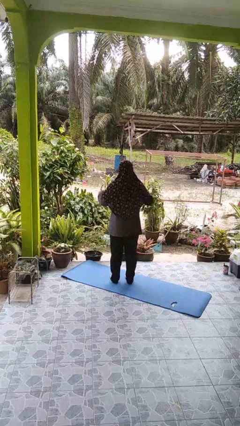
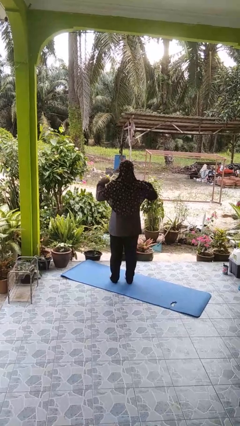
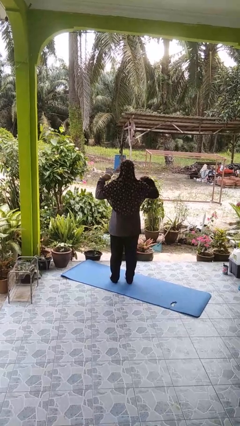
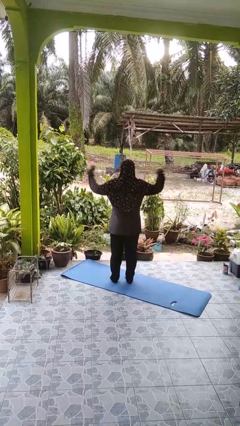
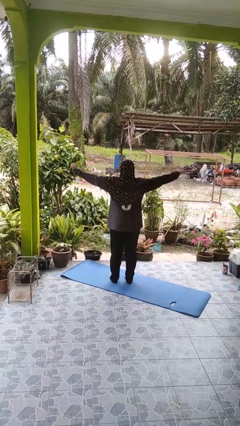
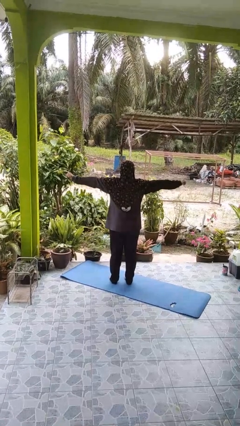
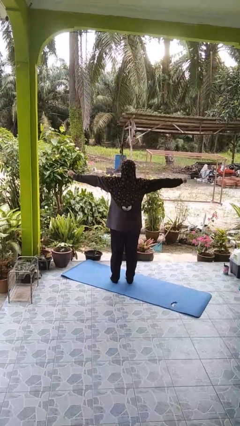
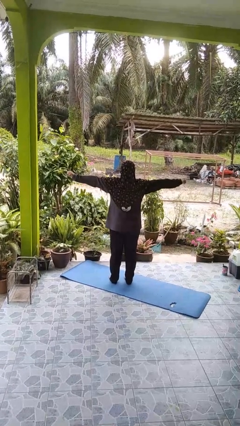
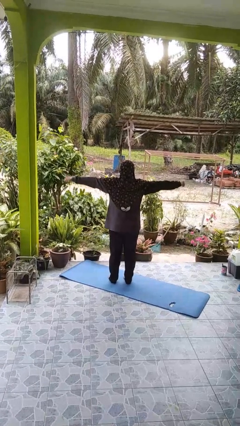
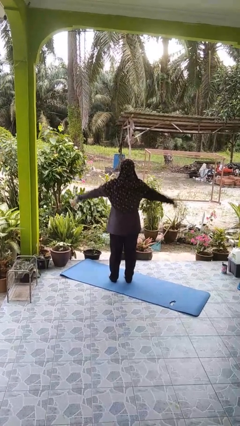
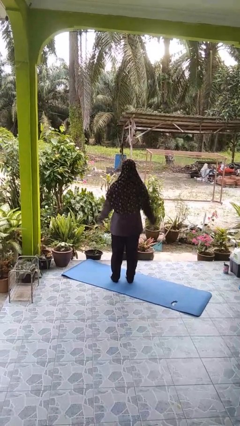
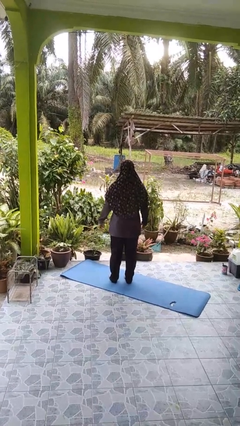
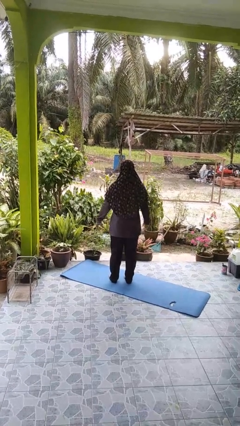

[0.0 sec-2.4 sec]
person stretches arms to side

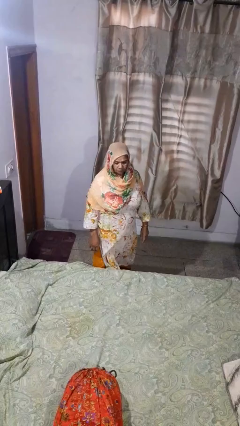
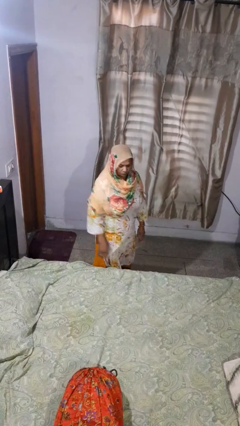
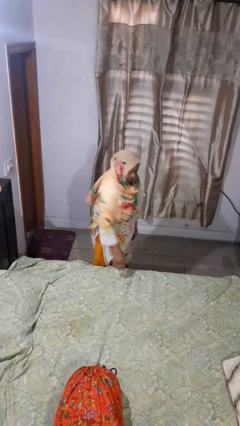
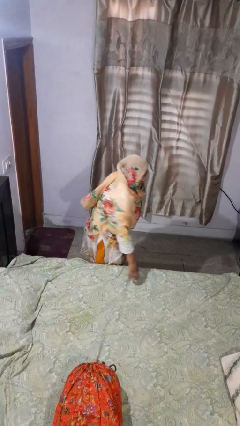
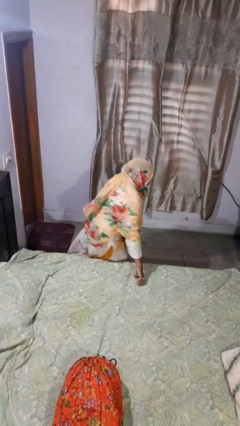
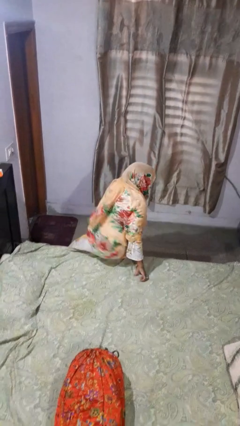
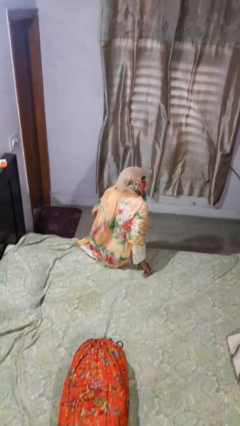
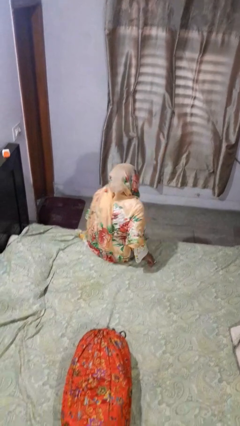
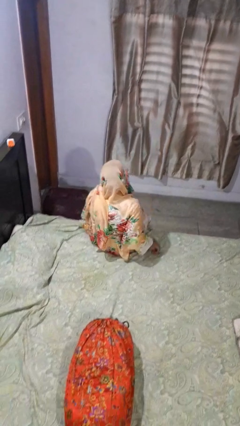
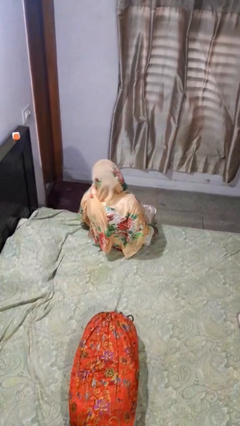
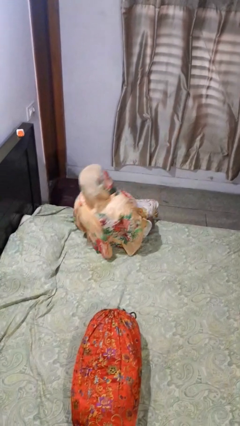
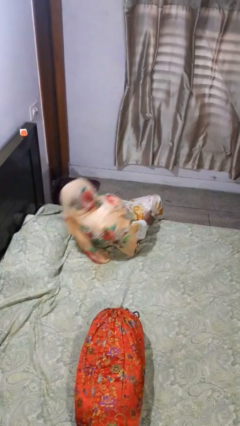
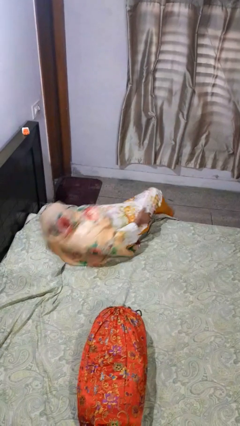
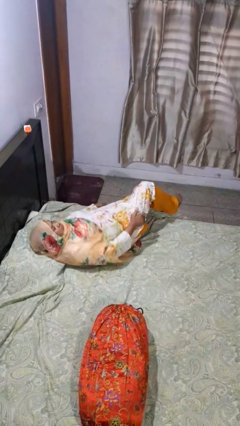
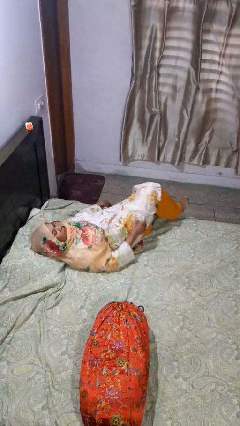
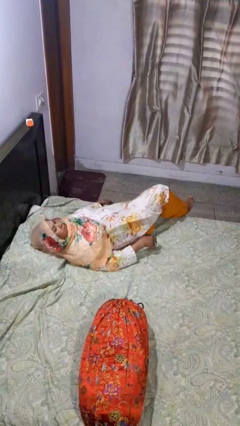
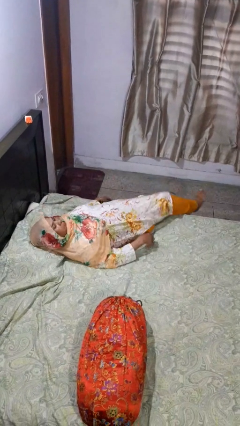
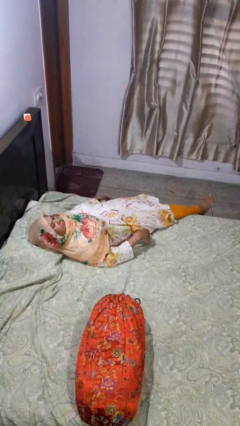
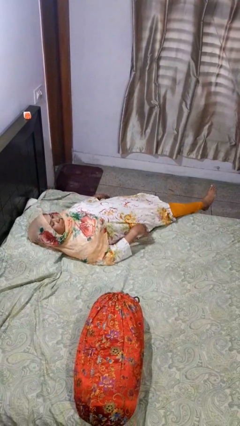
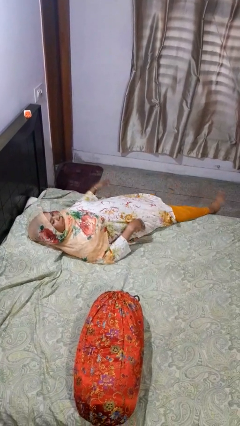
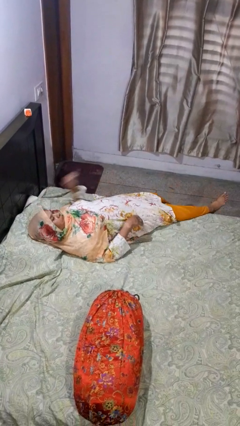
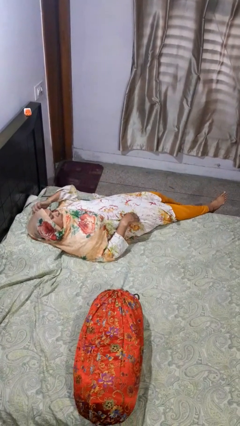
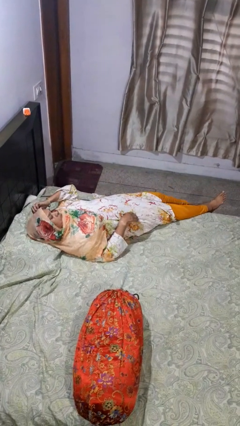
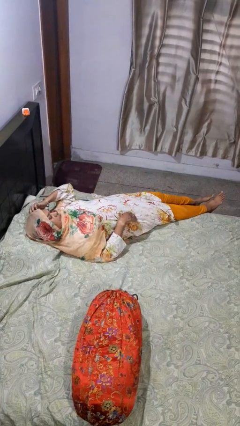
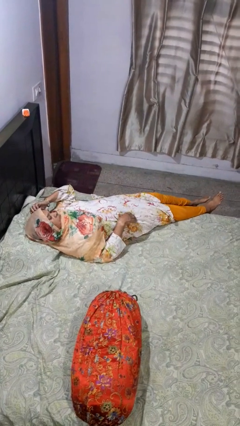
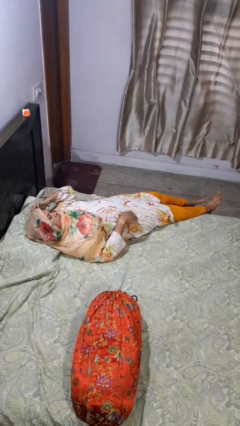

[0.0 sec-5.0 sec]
person lies down on bed

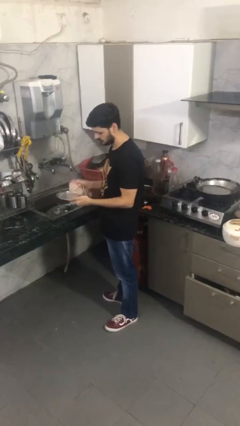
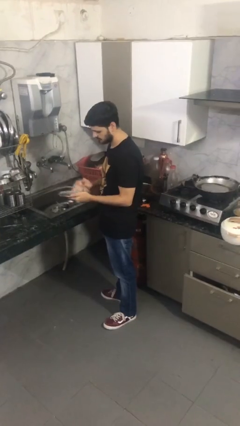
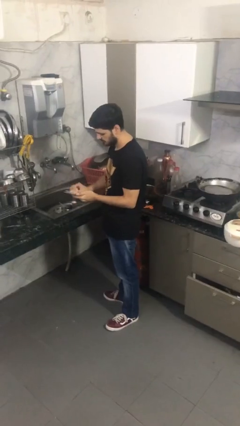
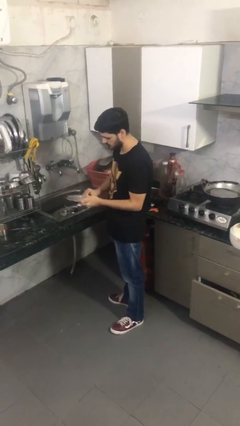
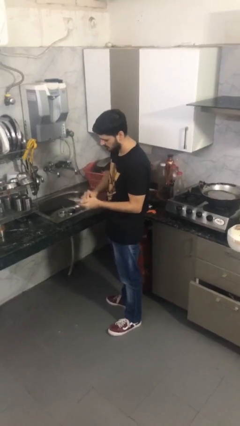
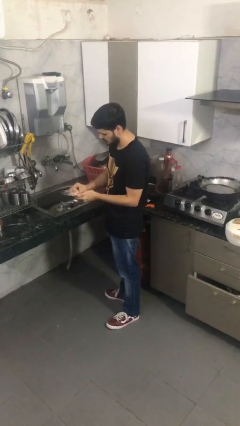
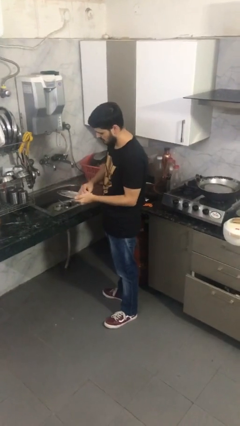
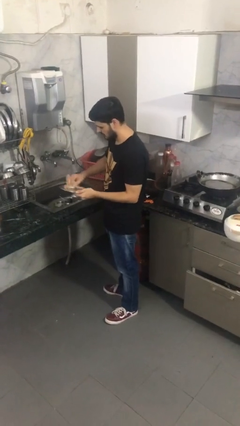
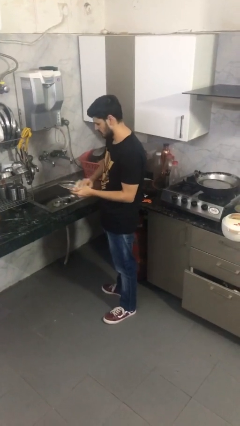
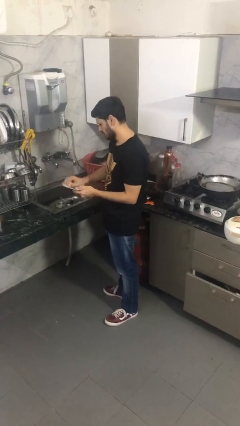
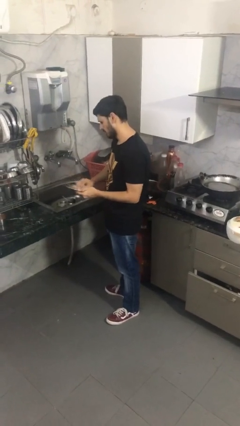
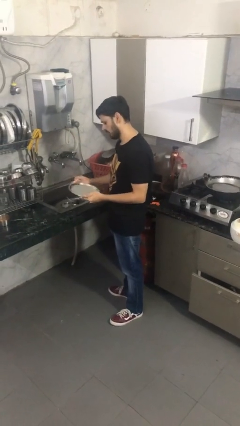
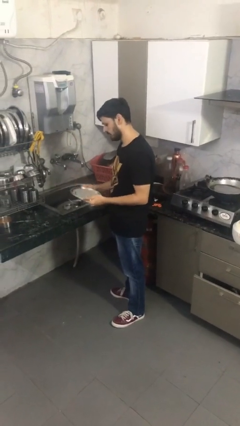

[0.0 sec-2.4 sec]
person dries dish

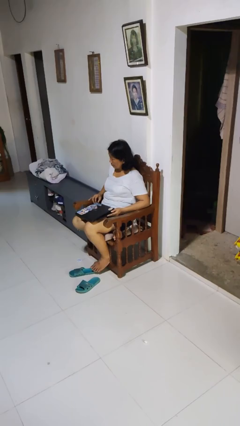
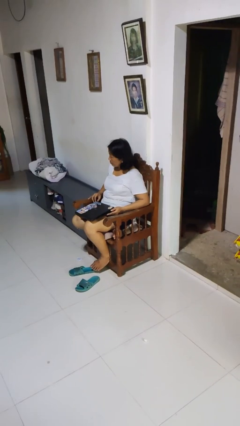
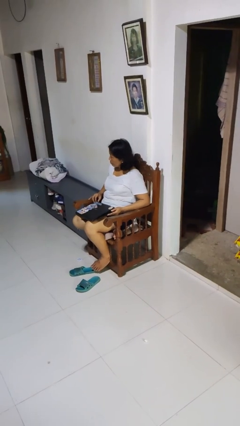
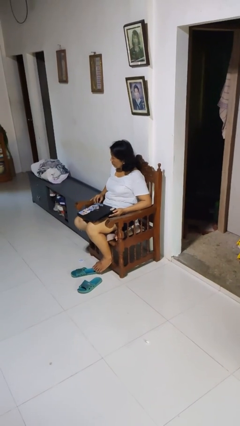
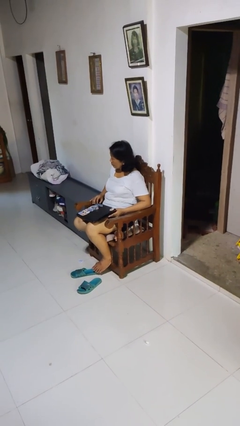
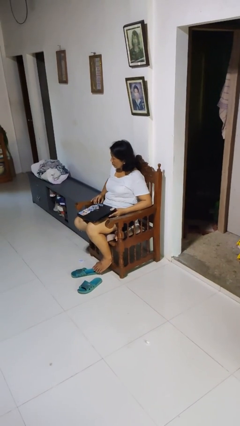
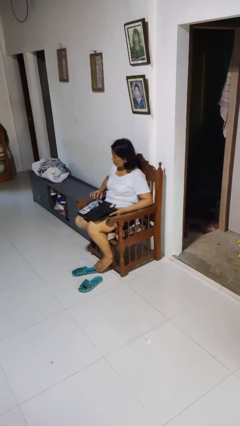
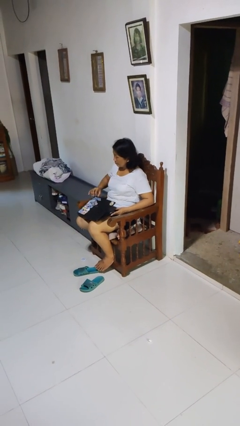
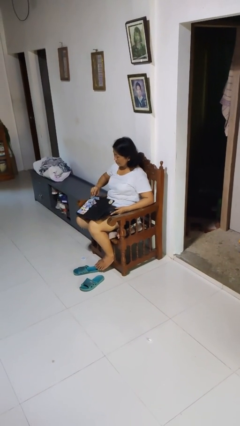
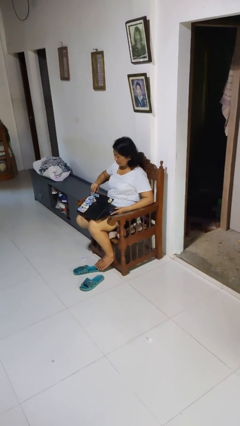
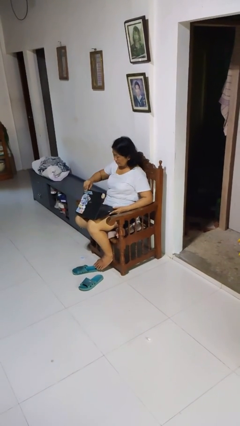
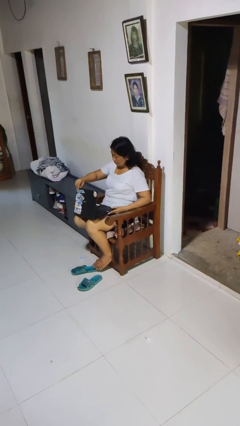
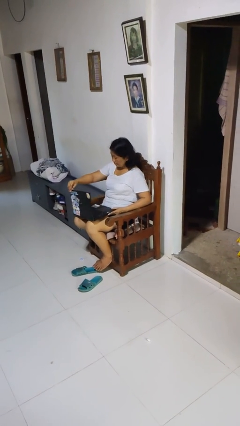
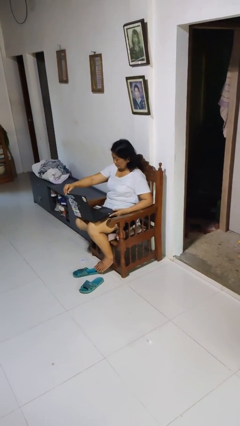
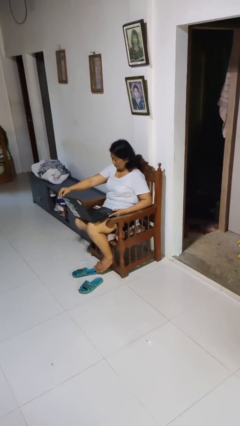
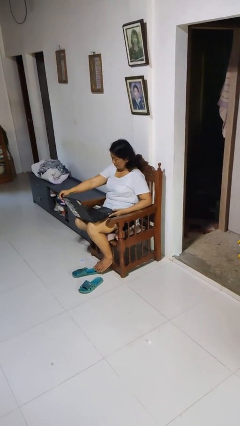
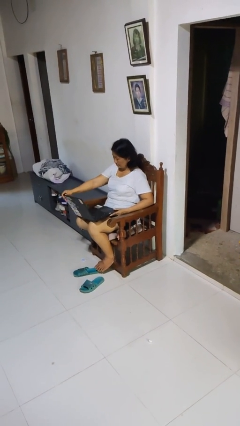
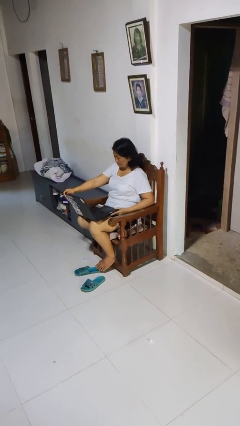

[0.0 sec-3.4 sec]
person opens laptop

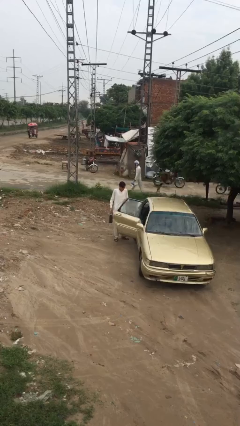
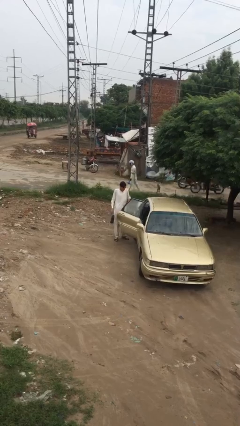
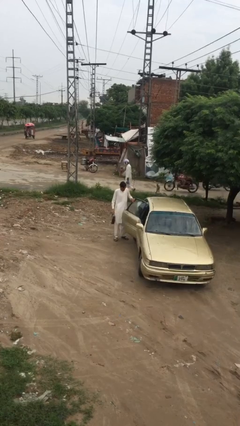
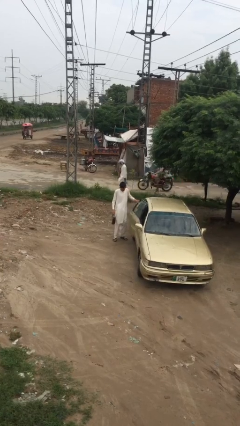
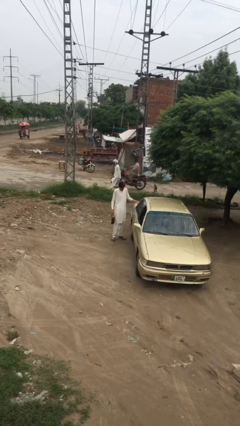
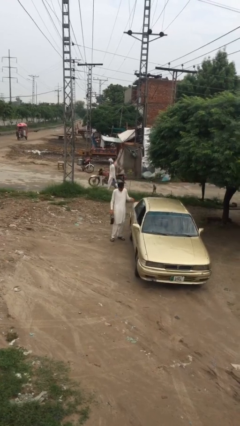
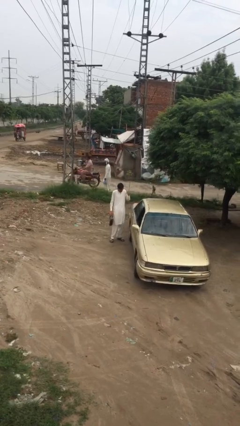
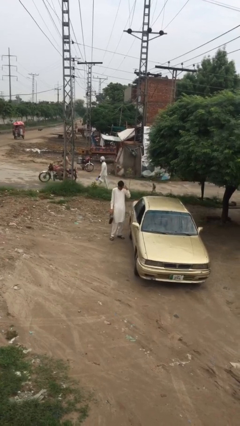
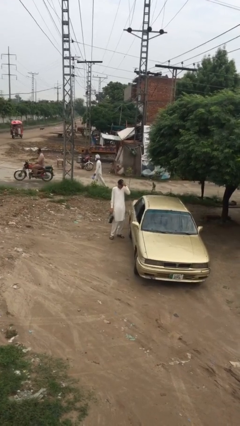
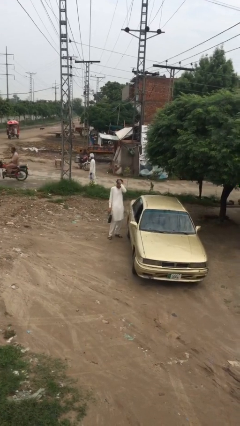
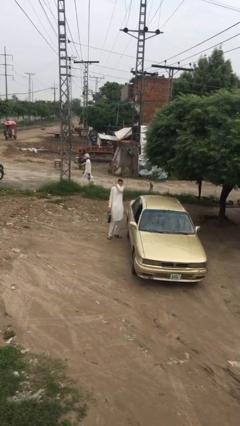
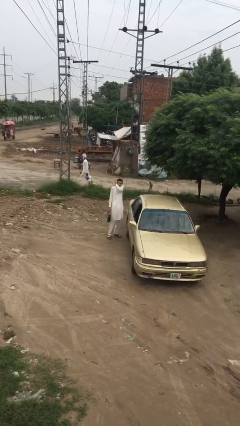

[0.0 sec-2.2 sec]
person closes car door

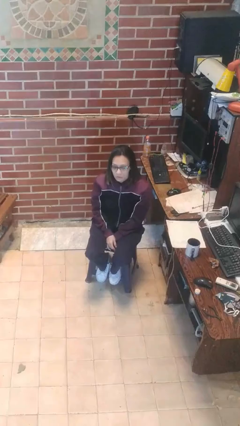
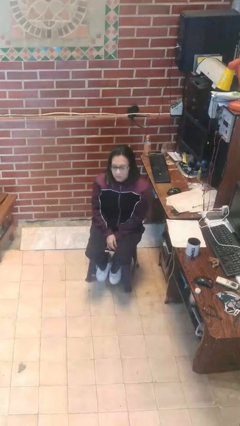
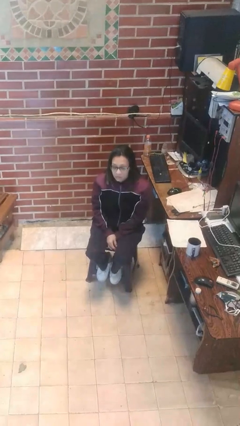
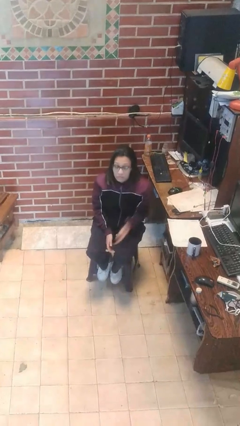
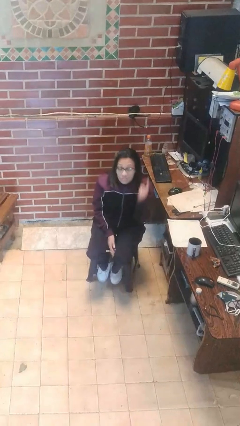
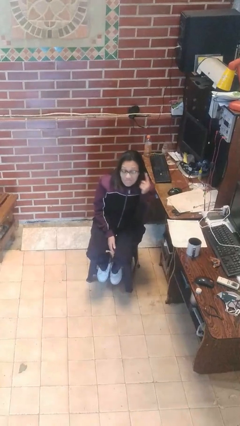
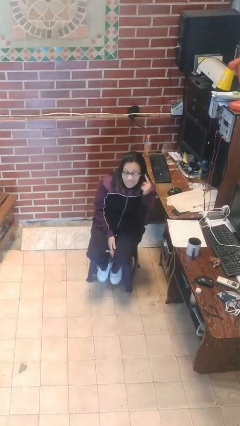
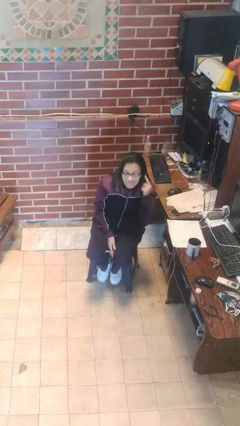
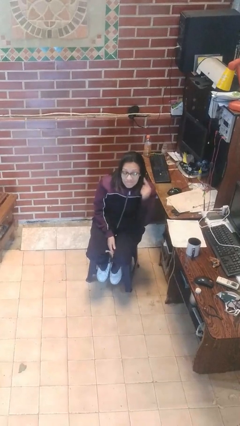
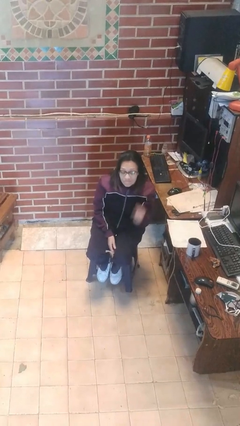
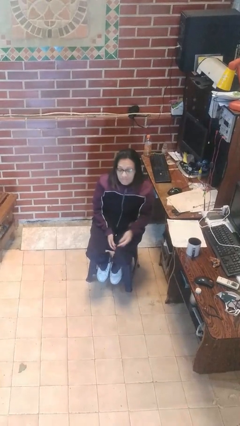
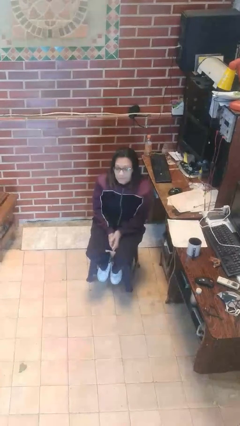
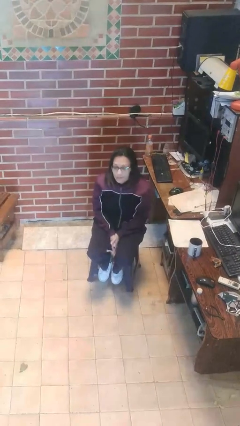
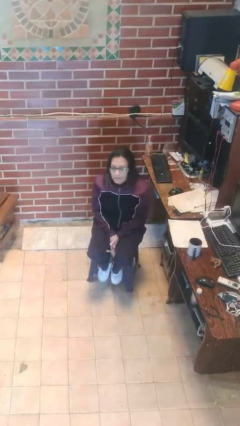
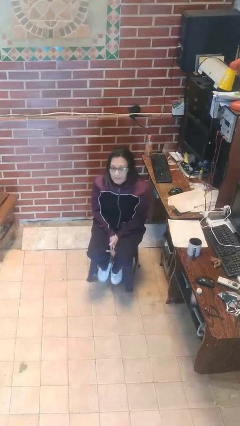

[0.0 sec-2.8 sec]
person gestures listen closely
